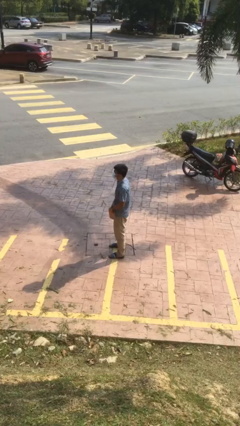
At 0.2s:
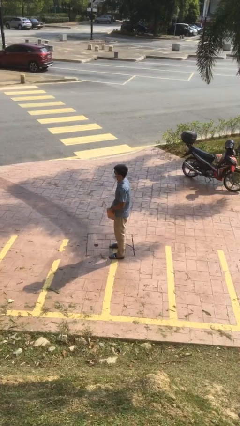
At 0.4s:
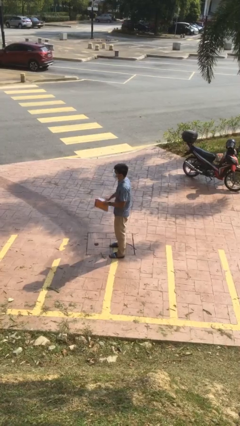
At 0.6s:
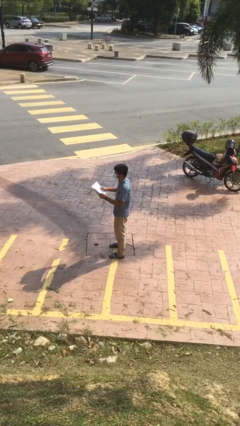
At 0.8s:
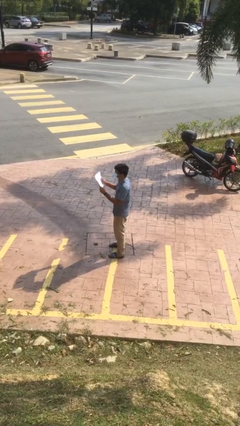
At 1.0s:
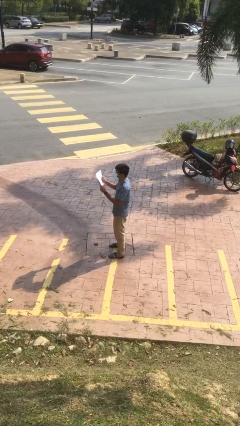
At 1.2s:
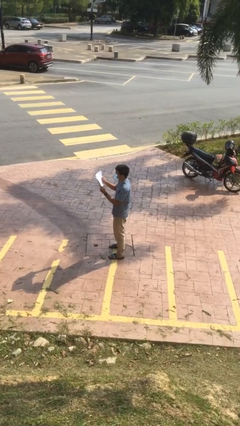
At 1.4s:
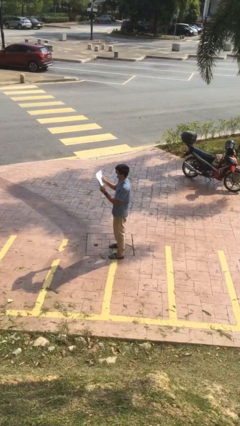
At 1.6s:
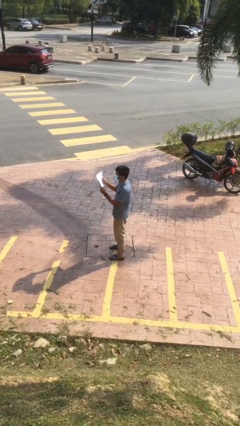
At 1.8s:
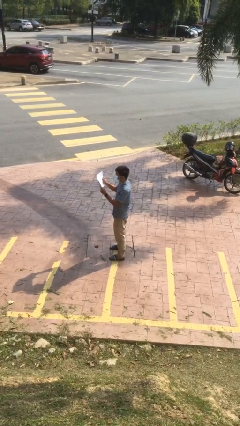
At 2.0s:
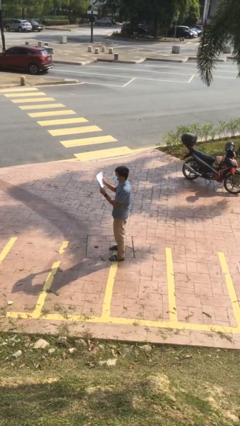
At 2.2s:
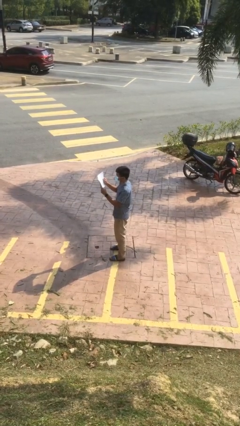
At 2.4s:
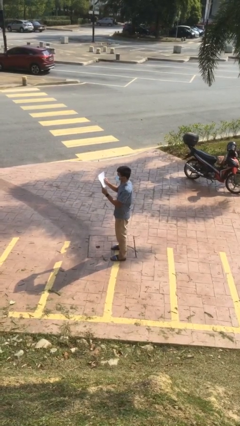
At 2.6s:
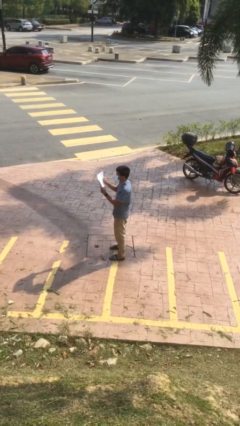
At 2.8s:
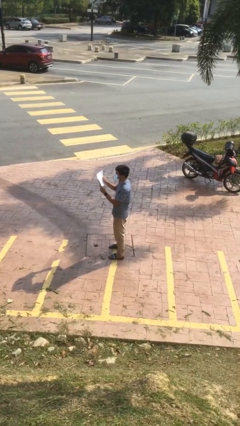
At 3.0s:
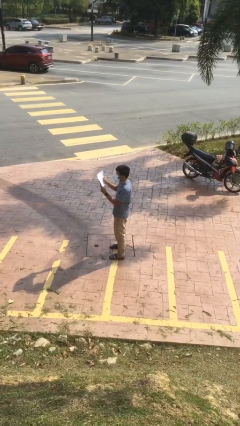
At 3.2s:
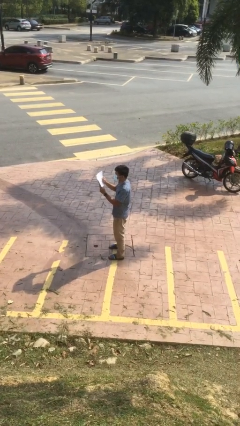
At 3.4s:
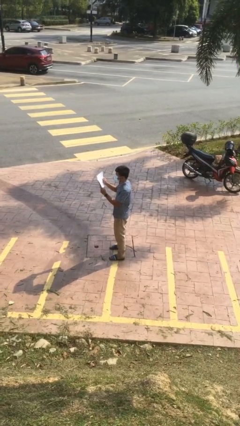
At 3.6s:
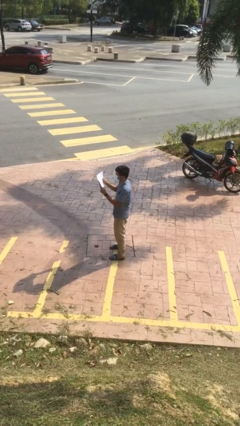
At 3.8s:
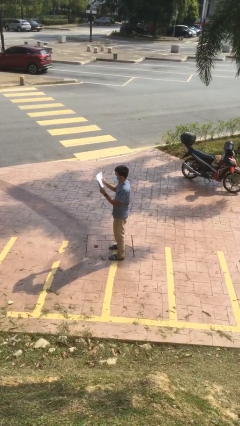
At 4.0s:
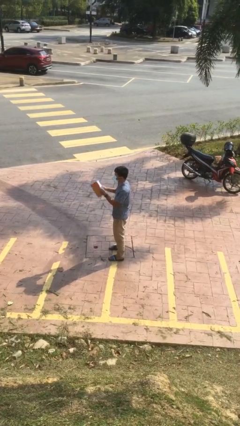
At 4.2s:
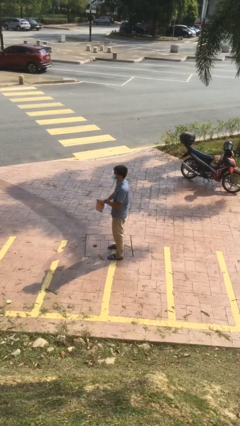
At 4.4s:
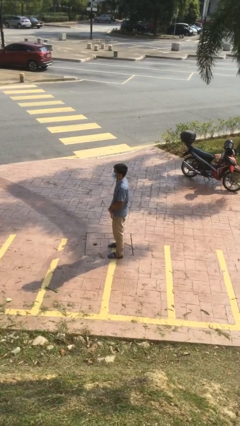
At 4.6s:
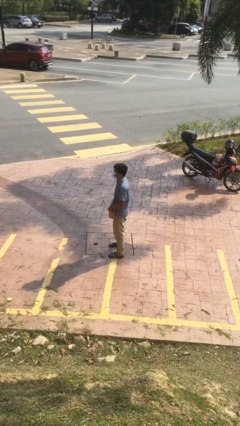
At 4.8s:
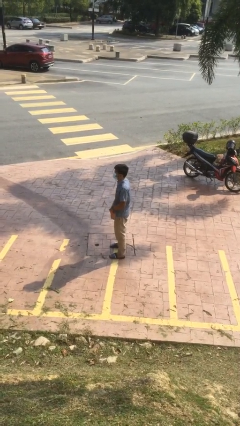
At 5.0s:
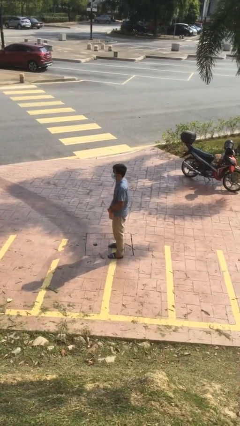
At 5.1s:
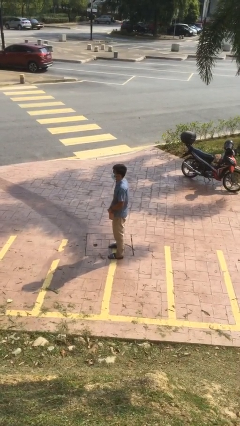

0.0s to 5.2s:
person reads document

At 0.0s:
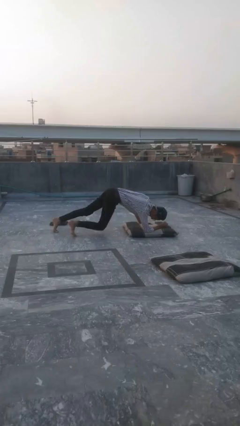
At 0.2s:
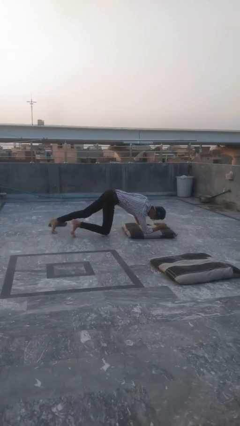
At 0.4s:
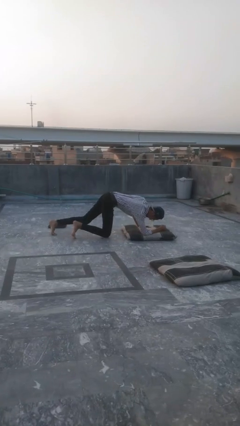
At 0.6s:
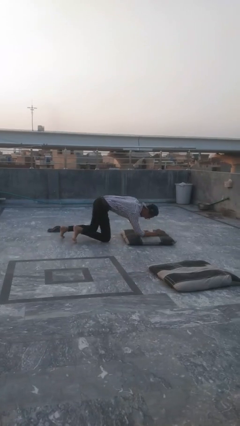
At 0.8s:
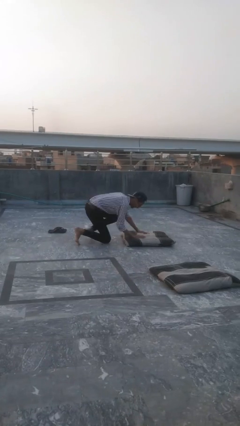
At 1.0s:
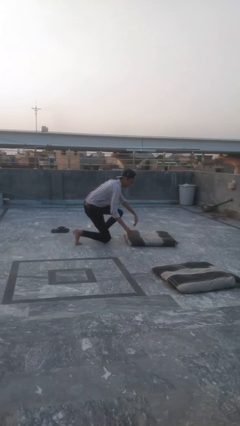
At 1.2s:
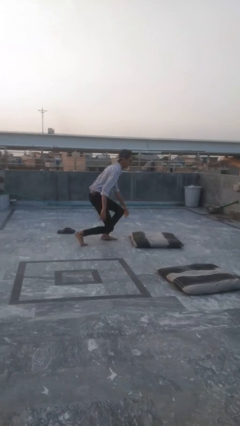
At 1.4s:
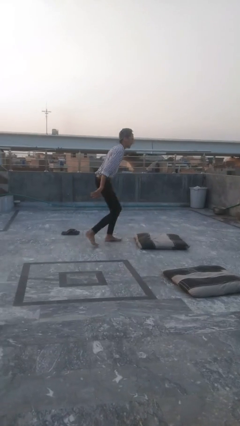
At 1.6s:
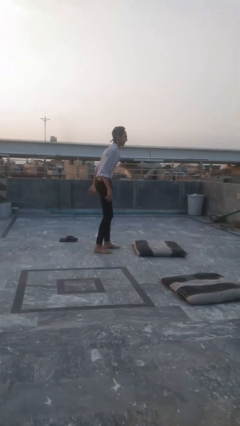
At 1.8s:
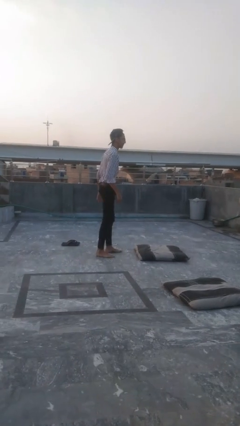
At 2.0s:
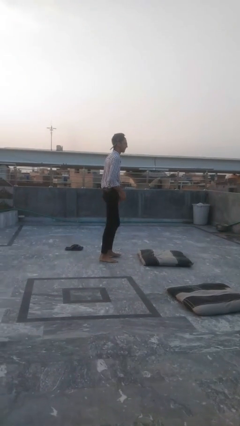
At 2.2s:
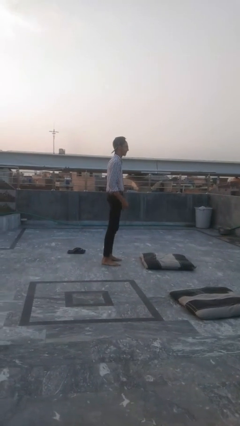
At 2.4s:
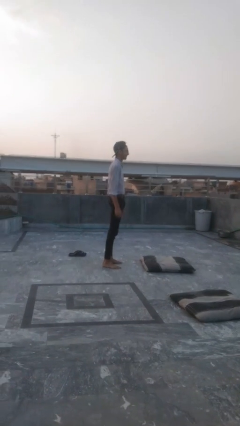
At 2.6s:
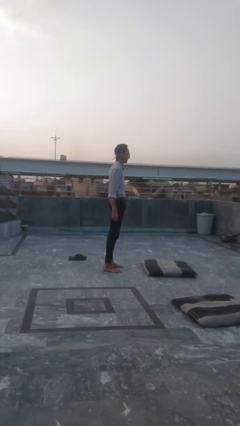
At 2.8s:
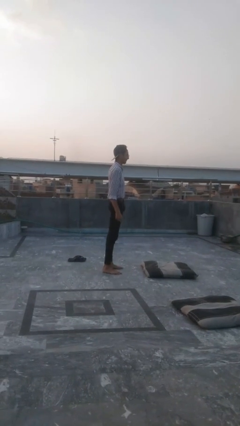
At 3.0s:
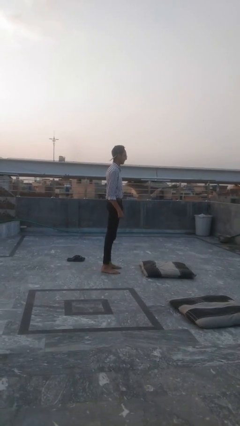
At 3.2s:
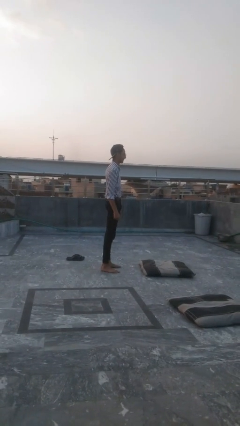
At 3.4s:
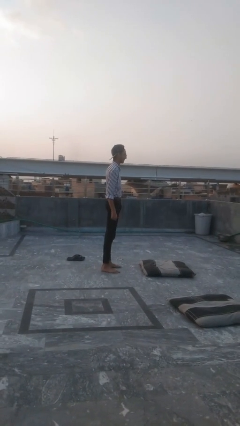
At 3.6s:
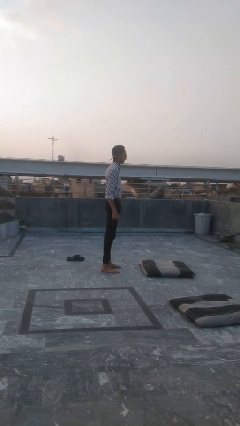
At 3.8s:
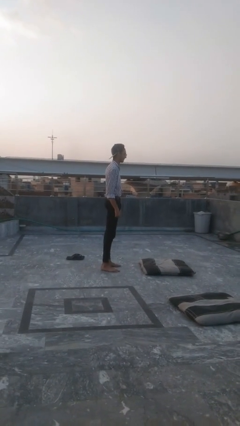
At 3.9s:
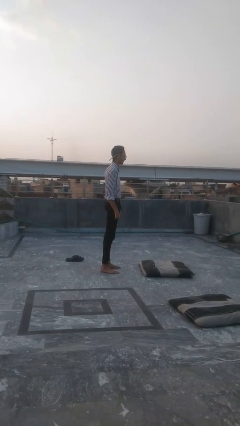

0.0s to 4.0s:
person stands up from floor

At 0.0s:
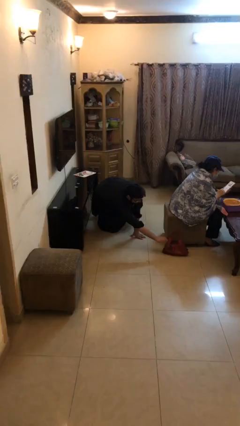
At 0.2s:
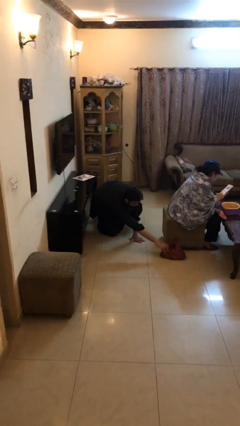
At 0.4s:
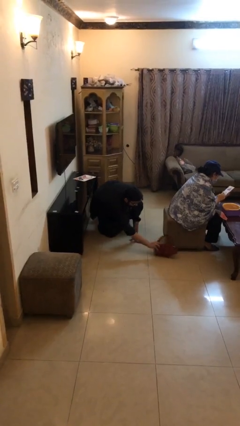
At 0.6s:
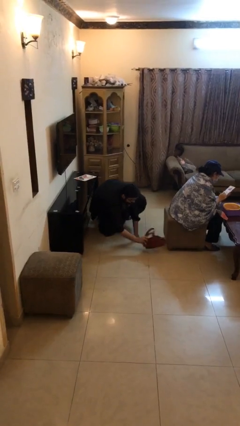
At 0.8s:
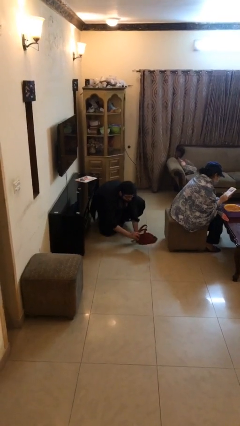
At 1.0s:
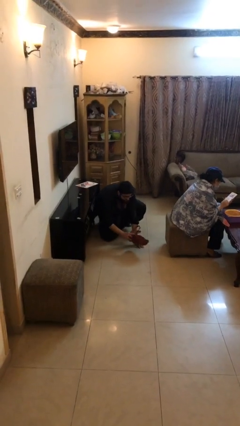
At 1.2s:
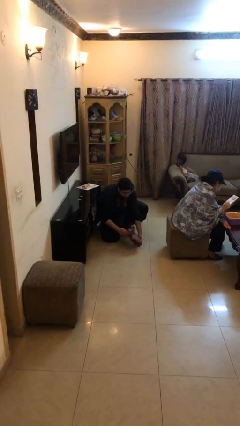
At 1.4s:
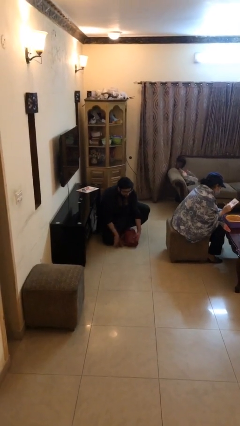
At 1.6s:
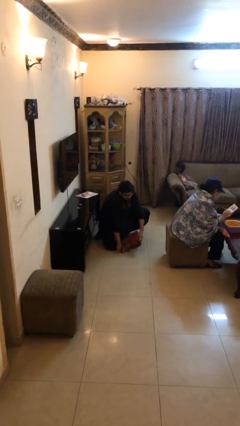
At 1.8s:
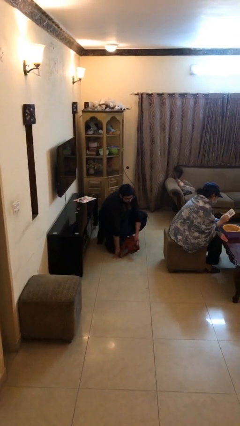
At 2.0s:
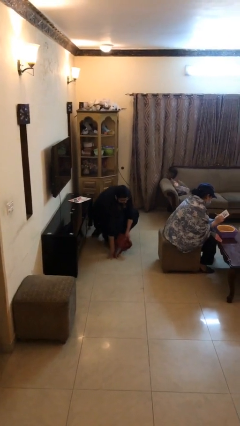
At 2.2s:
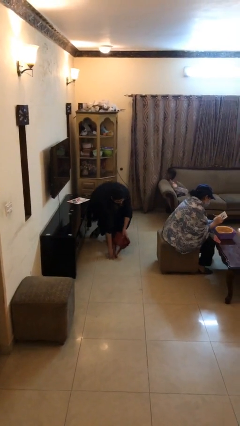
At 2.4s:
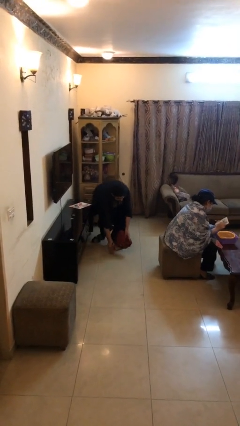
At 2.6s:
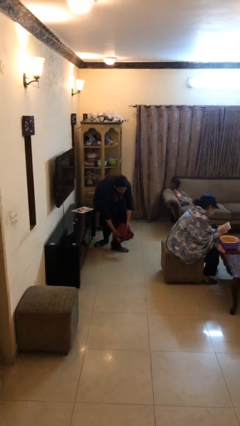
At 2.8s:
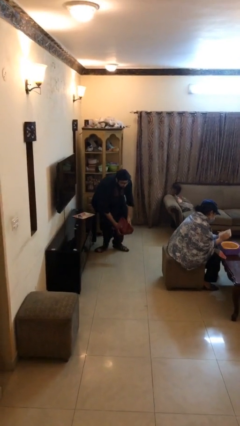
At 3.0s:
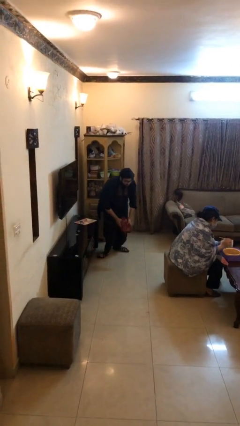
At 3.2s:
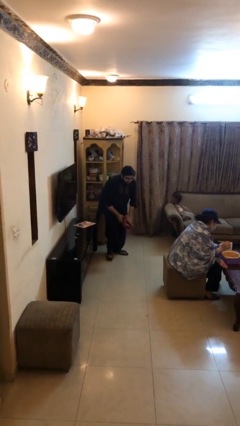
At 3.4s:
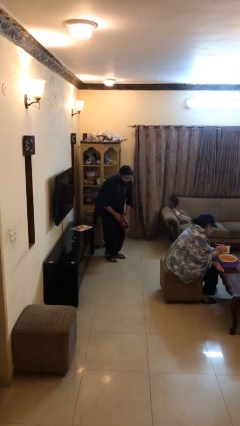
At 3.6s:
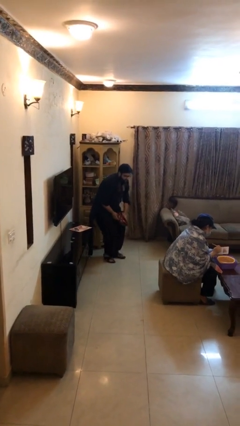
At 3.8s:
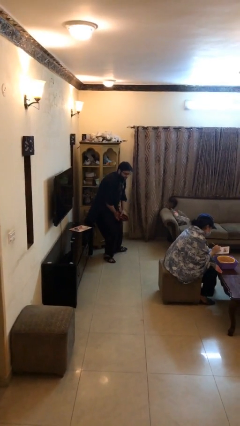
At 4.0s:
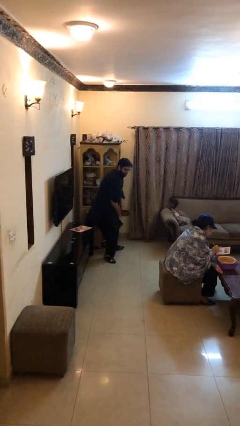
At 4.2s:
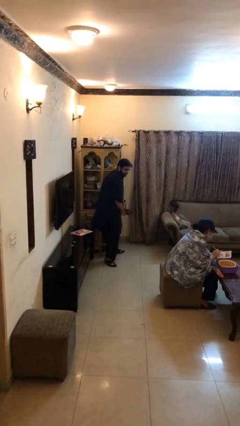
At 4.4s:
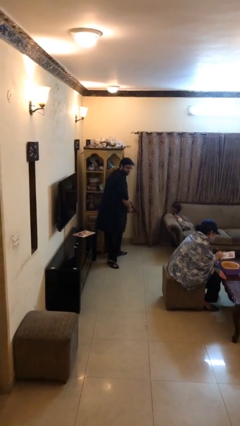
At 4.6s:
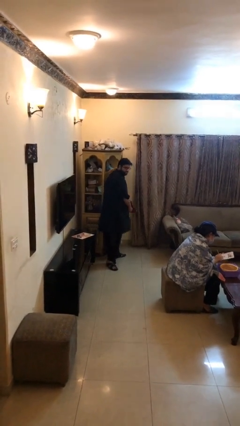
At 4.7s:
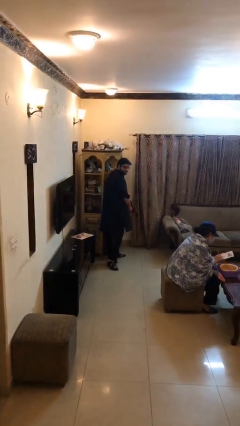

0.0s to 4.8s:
person steals object from person

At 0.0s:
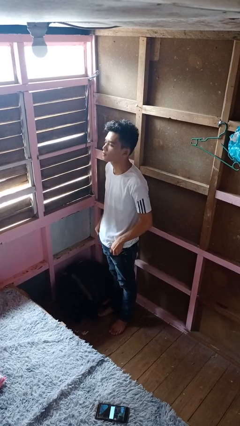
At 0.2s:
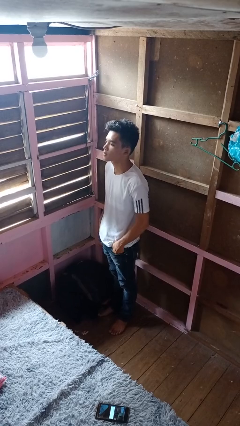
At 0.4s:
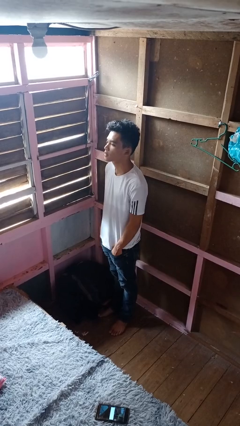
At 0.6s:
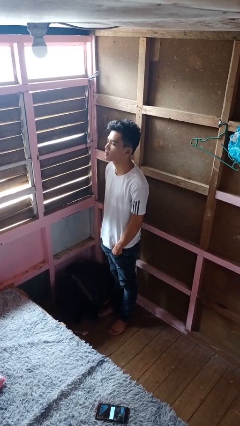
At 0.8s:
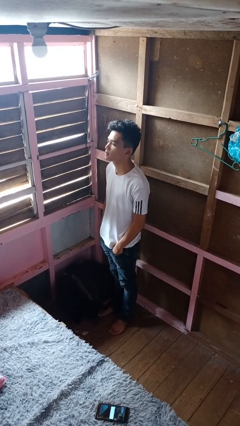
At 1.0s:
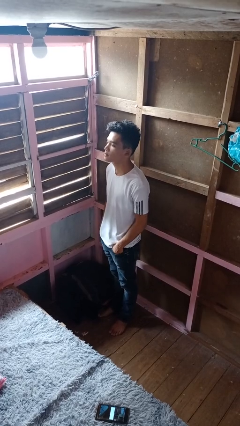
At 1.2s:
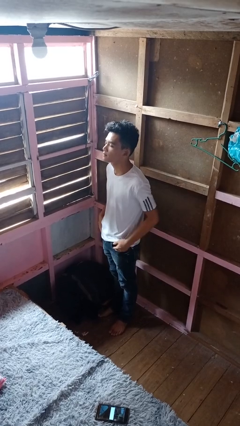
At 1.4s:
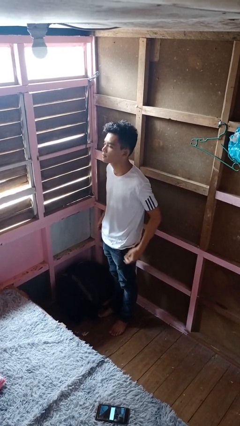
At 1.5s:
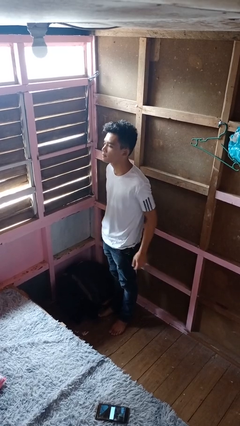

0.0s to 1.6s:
person puts hands in back pockets

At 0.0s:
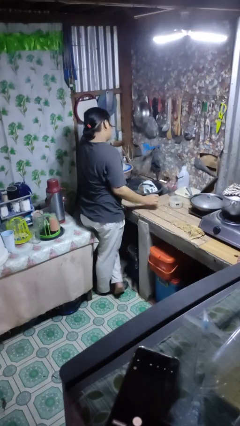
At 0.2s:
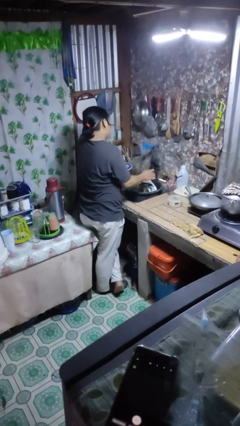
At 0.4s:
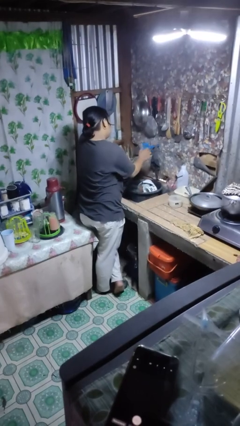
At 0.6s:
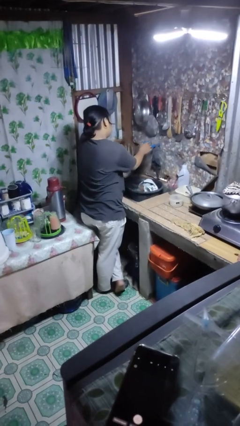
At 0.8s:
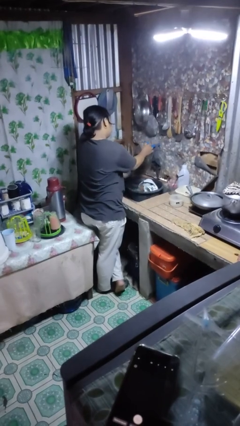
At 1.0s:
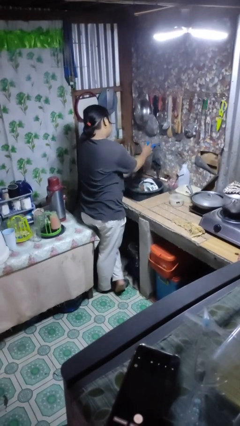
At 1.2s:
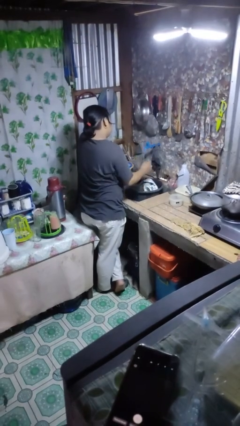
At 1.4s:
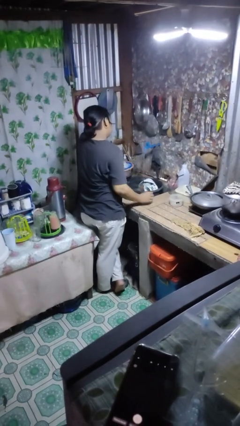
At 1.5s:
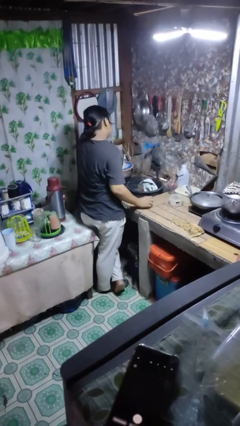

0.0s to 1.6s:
person turns on faucet

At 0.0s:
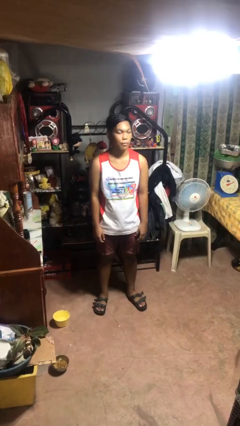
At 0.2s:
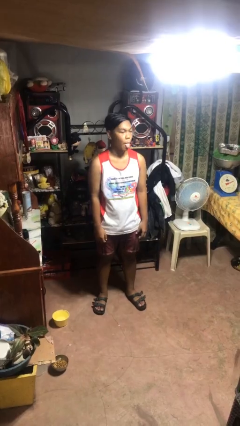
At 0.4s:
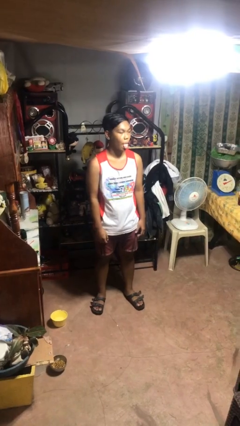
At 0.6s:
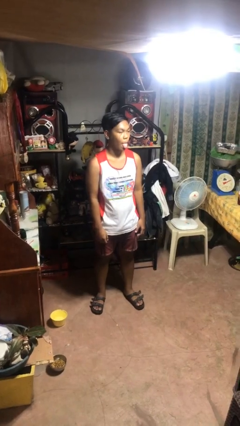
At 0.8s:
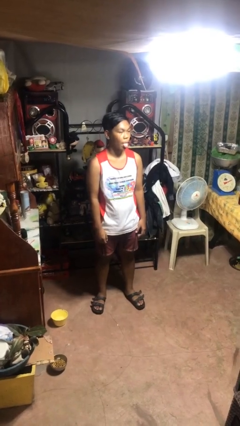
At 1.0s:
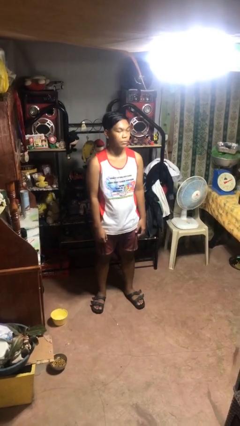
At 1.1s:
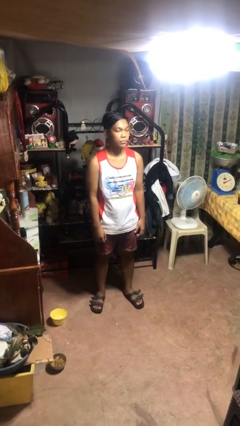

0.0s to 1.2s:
person sticks out tongue
